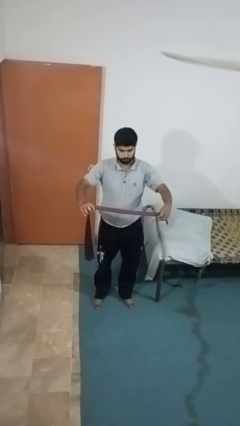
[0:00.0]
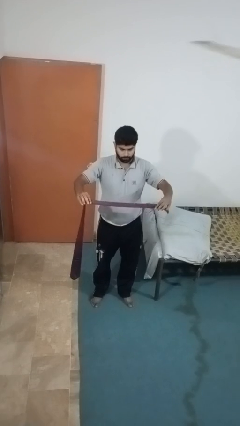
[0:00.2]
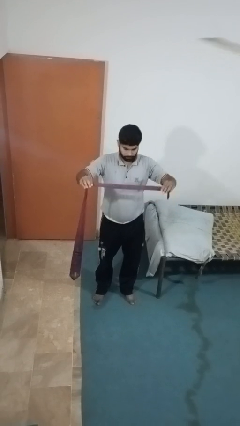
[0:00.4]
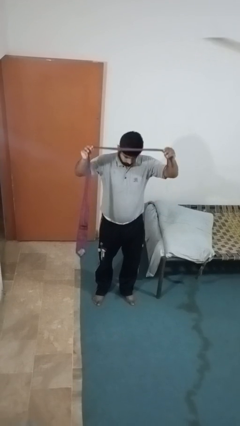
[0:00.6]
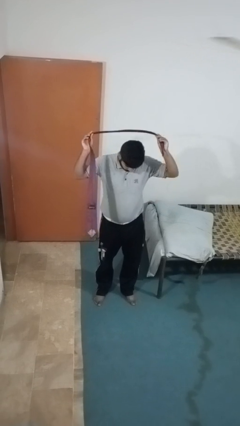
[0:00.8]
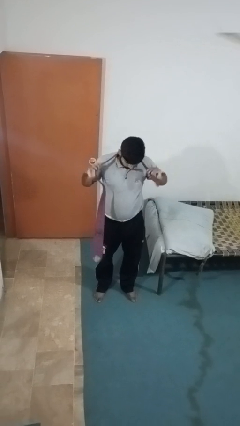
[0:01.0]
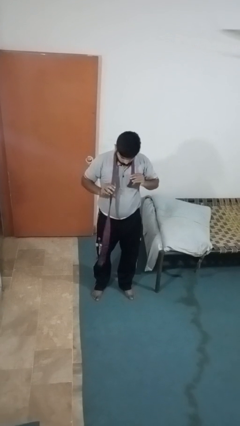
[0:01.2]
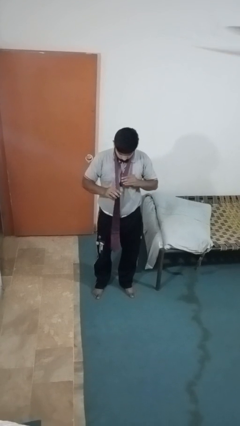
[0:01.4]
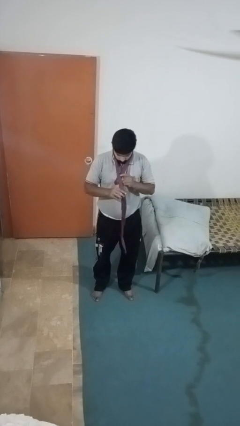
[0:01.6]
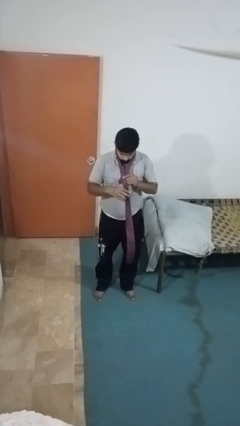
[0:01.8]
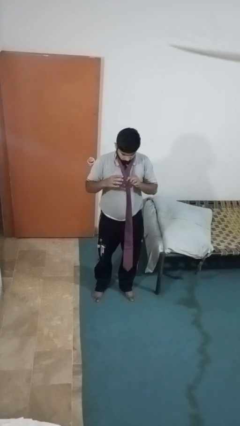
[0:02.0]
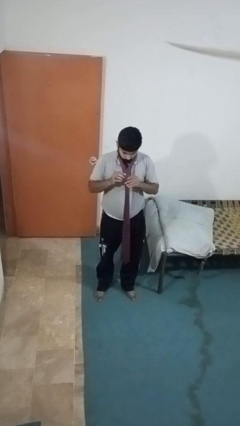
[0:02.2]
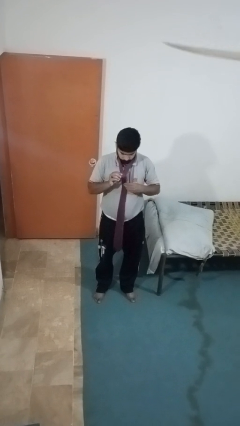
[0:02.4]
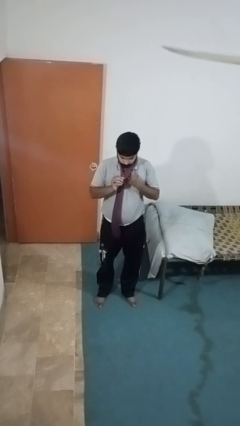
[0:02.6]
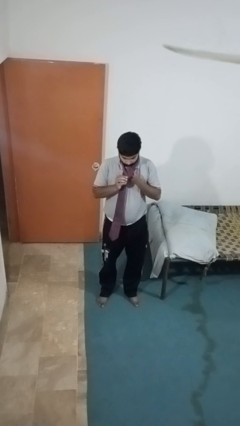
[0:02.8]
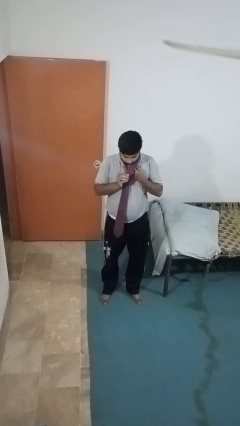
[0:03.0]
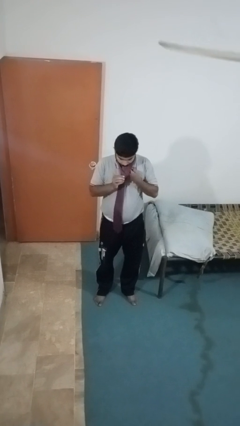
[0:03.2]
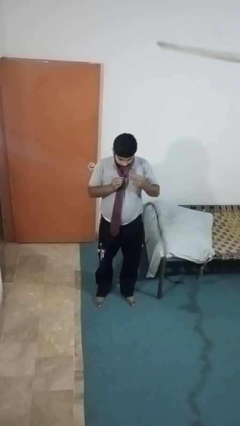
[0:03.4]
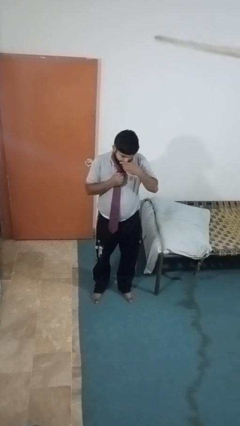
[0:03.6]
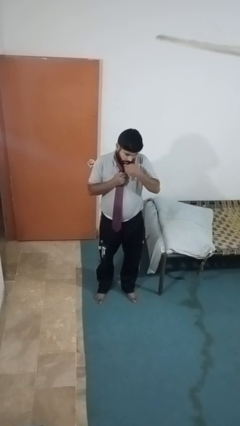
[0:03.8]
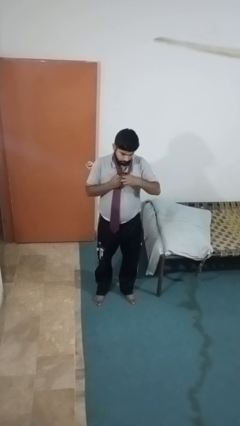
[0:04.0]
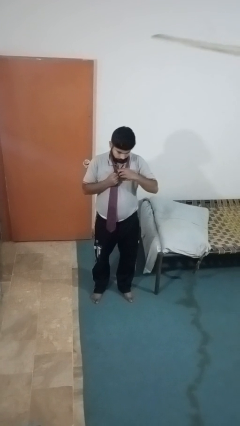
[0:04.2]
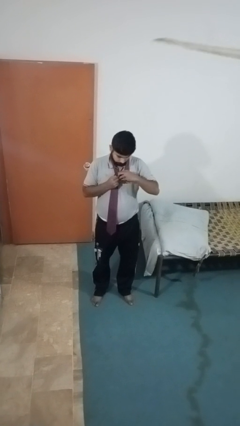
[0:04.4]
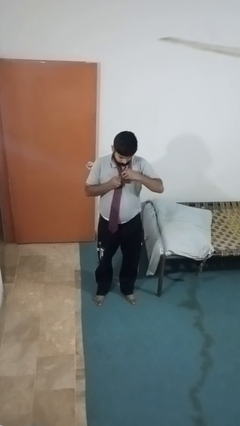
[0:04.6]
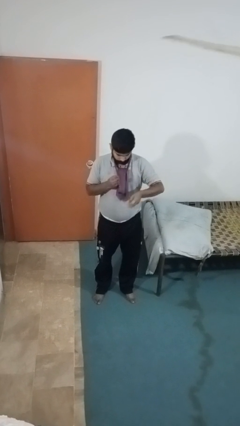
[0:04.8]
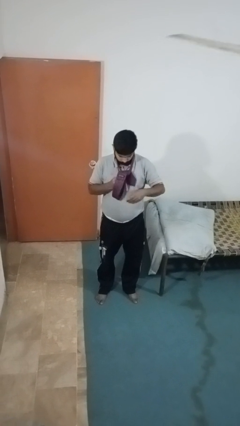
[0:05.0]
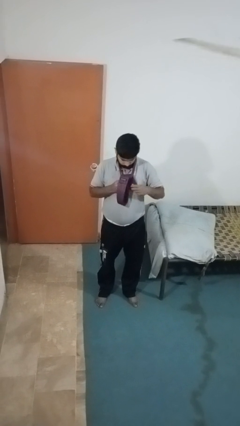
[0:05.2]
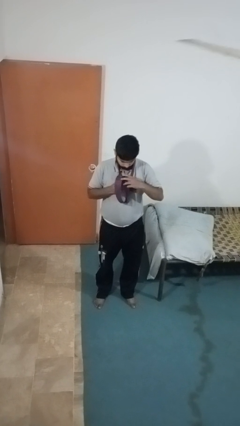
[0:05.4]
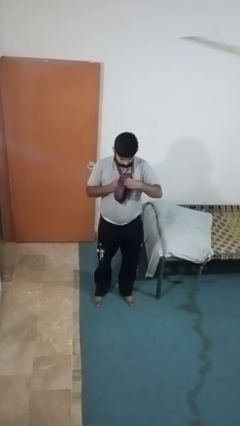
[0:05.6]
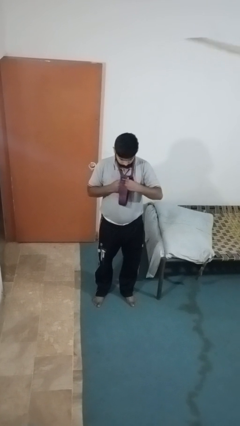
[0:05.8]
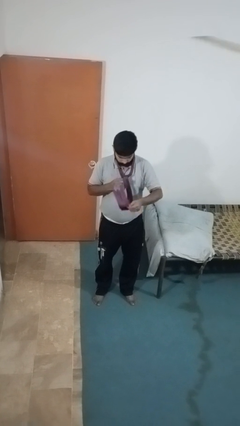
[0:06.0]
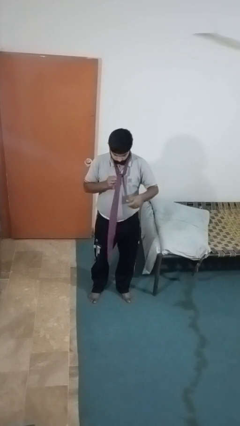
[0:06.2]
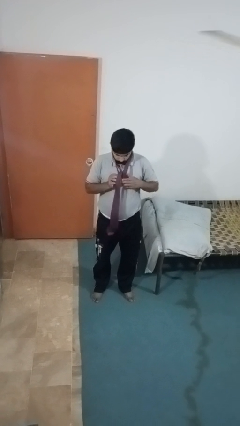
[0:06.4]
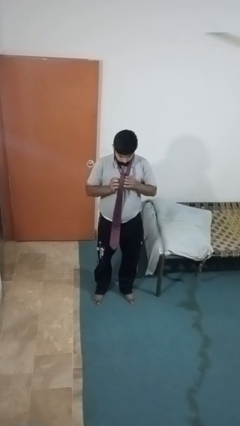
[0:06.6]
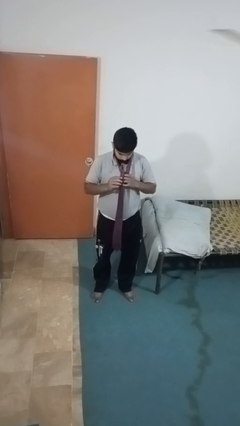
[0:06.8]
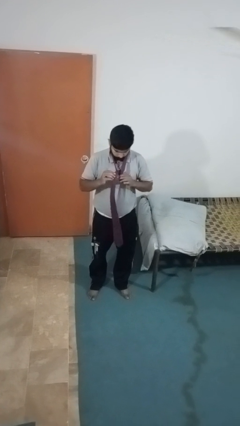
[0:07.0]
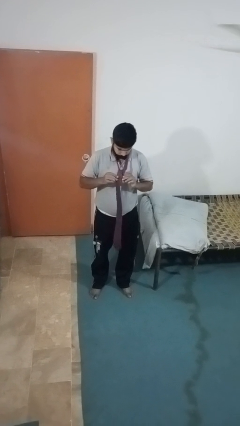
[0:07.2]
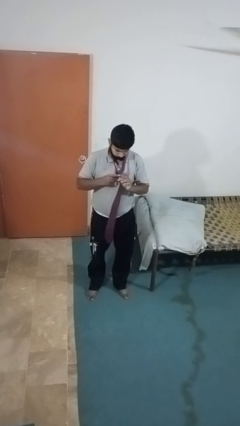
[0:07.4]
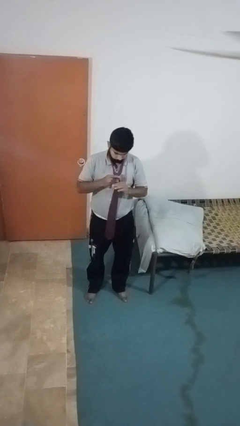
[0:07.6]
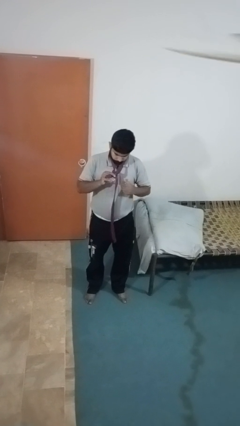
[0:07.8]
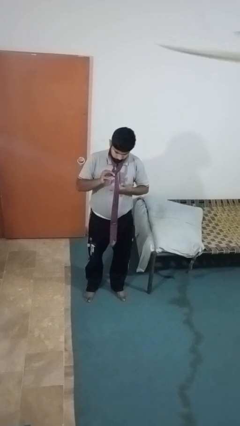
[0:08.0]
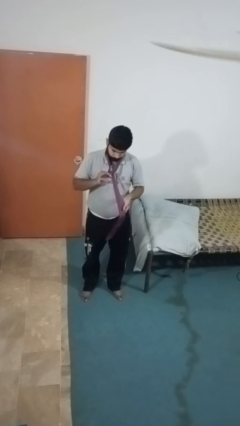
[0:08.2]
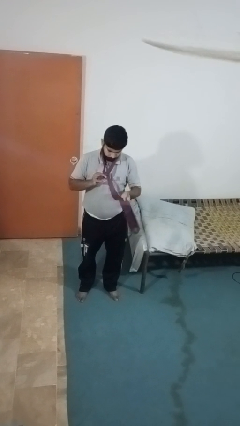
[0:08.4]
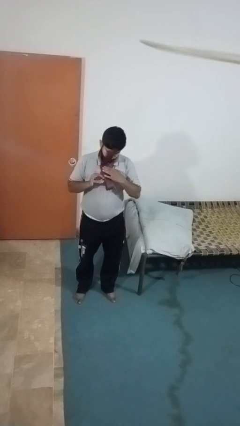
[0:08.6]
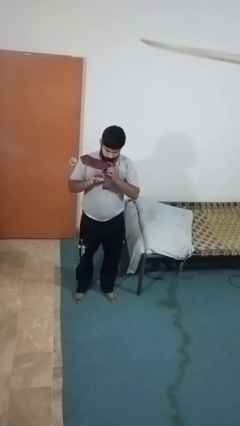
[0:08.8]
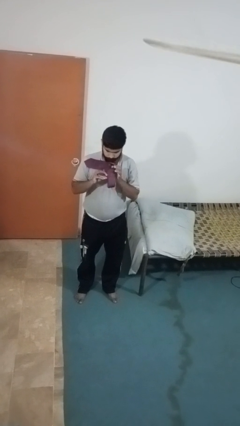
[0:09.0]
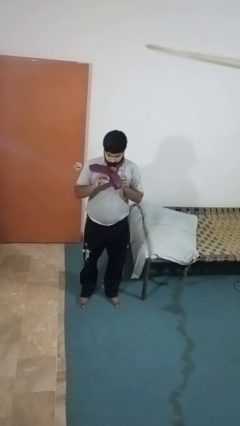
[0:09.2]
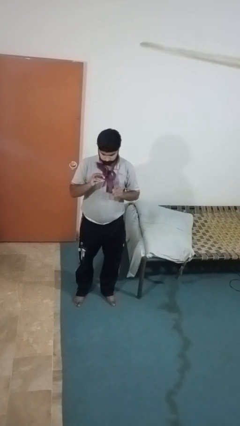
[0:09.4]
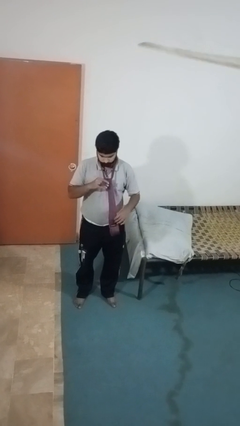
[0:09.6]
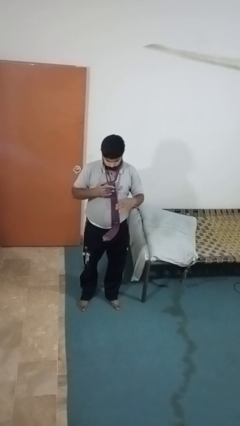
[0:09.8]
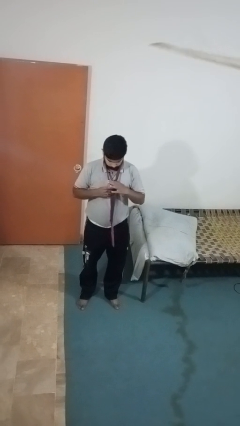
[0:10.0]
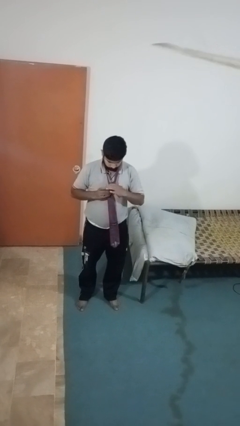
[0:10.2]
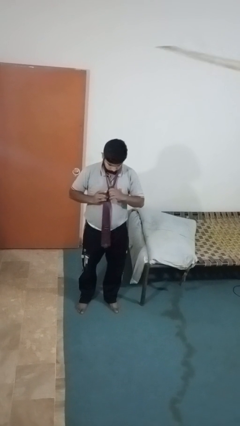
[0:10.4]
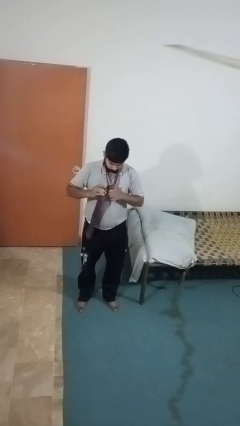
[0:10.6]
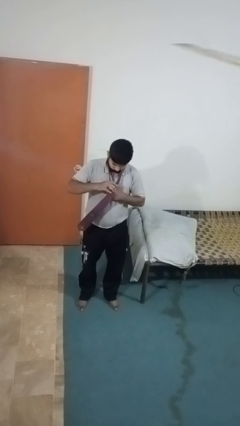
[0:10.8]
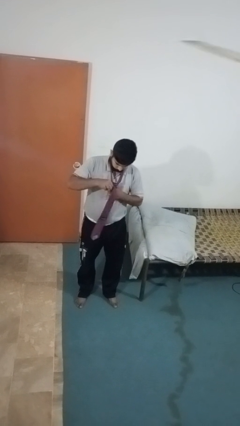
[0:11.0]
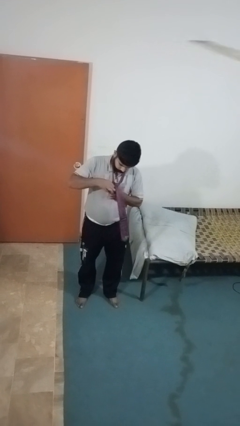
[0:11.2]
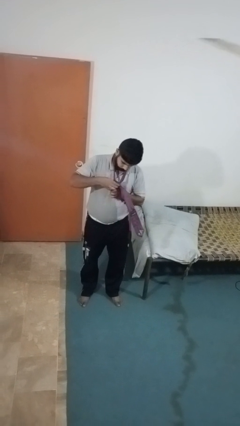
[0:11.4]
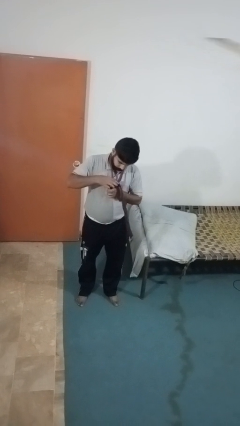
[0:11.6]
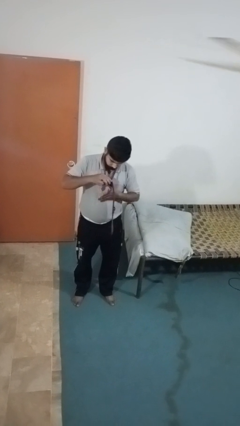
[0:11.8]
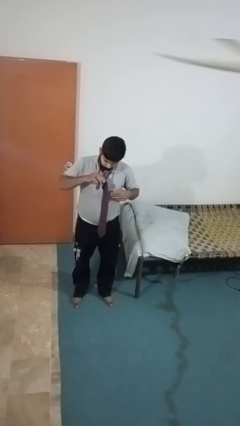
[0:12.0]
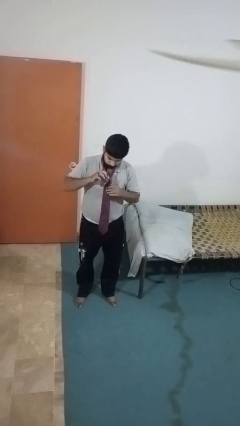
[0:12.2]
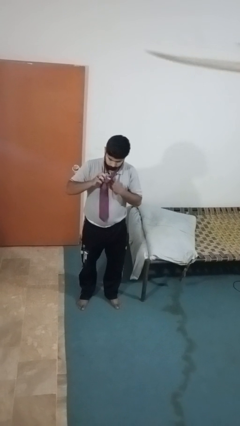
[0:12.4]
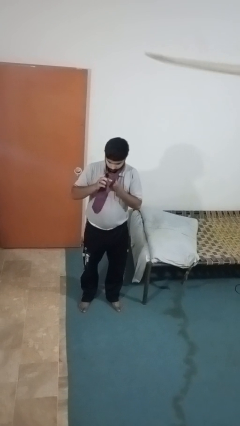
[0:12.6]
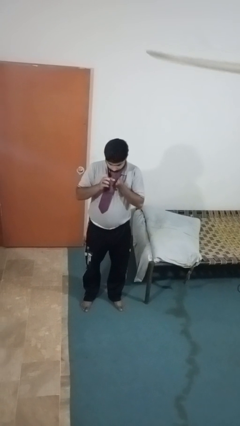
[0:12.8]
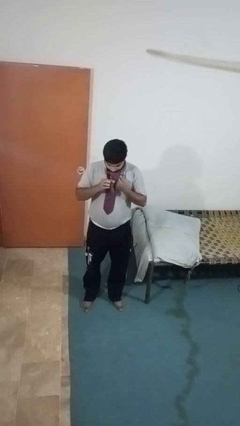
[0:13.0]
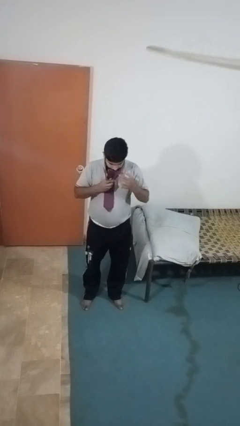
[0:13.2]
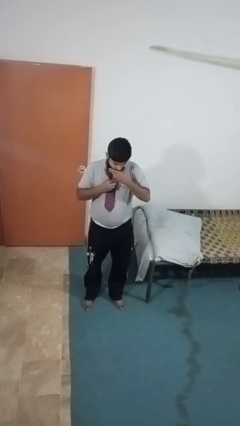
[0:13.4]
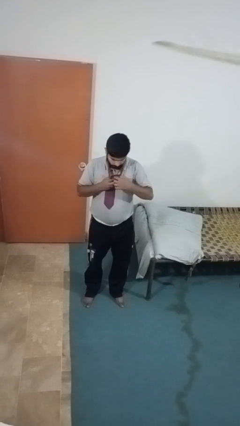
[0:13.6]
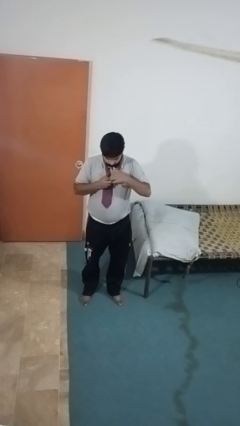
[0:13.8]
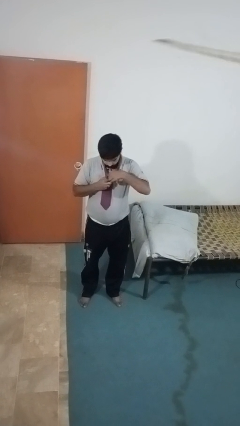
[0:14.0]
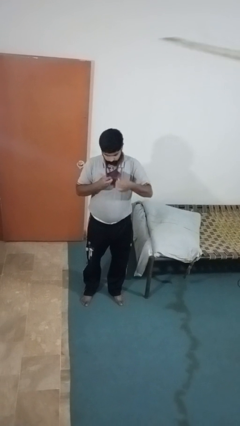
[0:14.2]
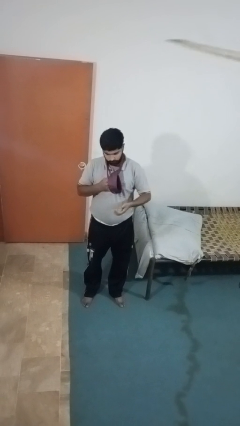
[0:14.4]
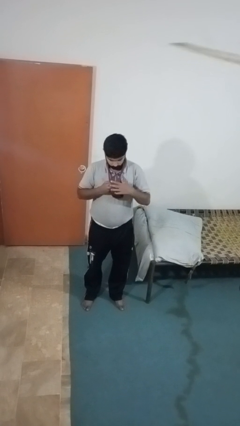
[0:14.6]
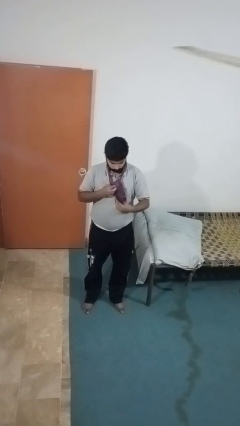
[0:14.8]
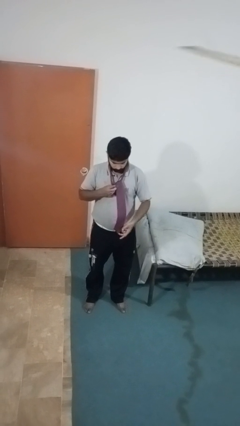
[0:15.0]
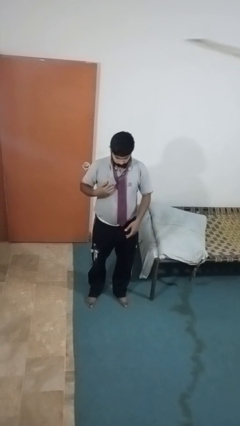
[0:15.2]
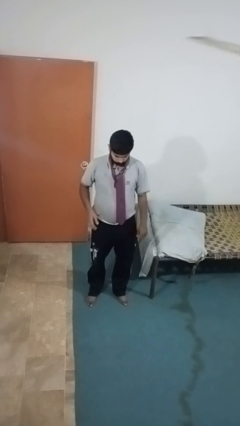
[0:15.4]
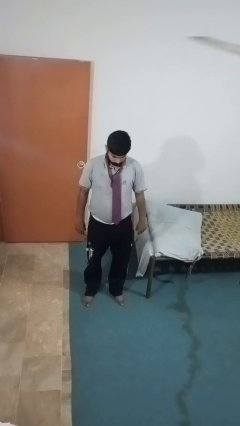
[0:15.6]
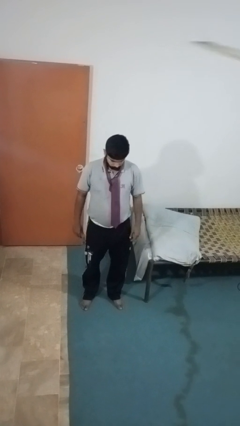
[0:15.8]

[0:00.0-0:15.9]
person puts on necktie

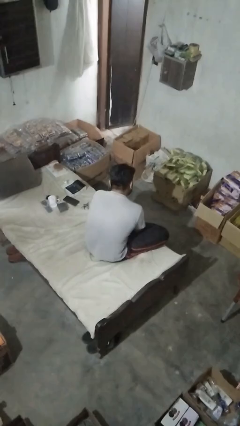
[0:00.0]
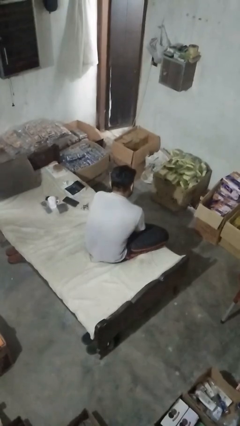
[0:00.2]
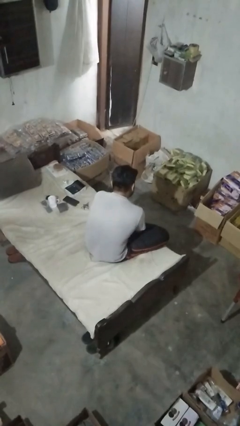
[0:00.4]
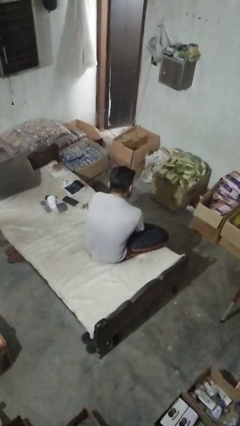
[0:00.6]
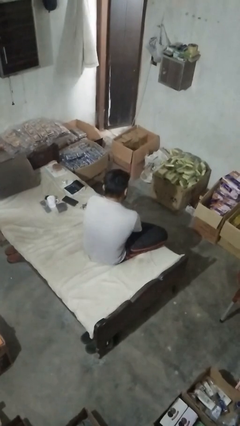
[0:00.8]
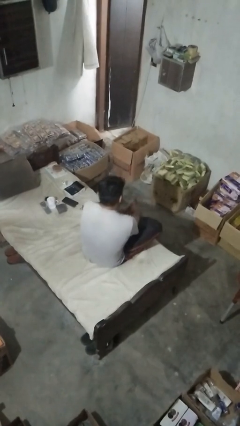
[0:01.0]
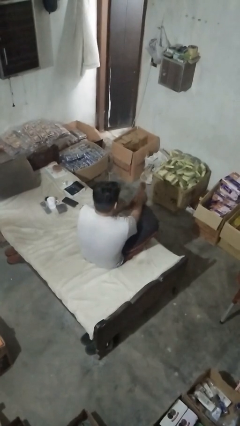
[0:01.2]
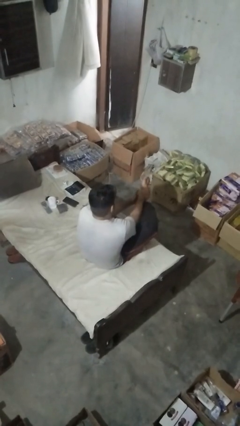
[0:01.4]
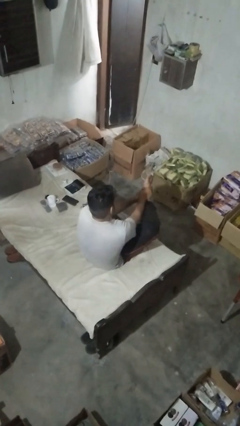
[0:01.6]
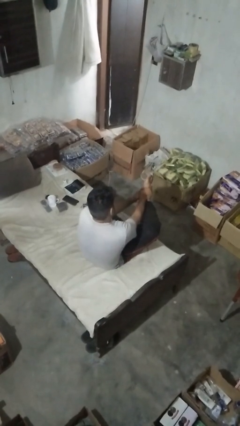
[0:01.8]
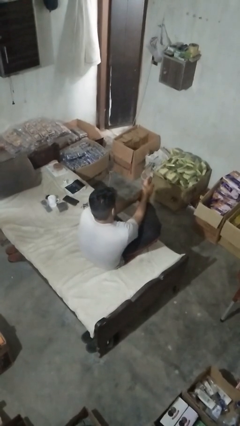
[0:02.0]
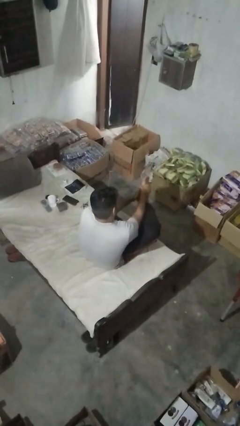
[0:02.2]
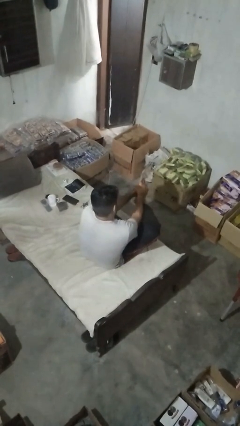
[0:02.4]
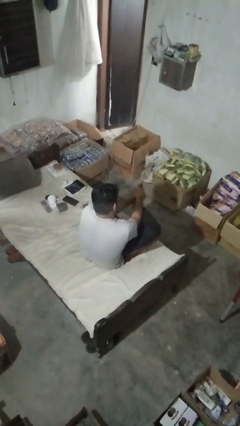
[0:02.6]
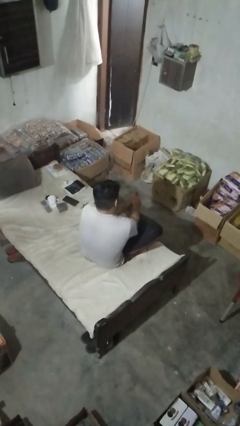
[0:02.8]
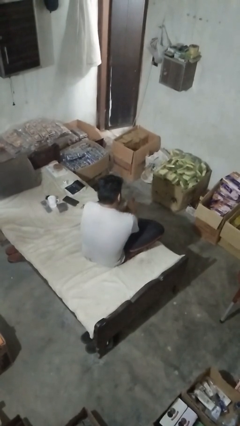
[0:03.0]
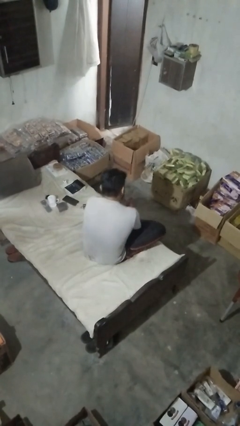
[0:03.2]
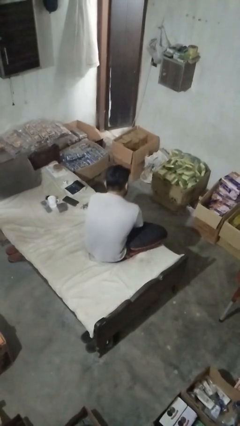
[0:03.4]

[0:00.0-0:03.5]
person rubs foot
